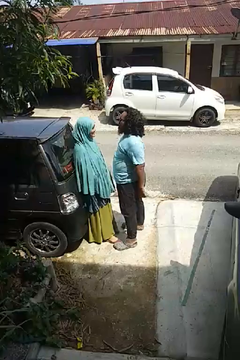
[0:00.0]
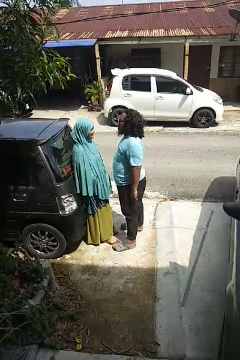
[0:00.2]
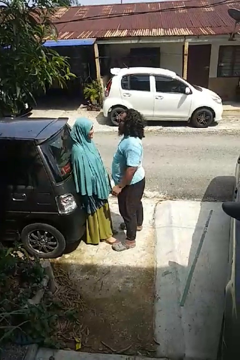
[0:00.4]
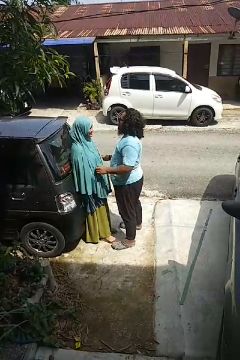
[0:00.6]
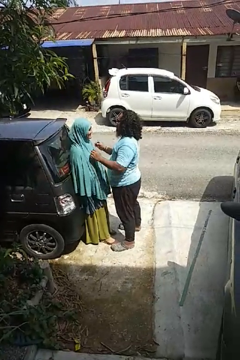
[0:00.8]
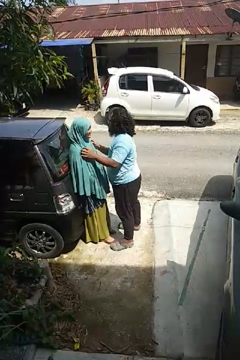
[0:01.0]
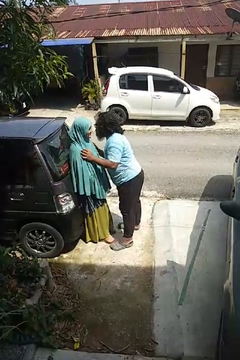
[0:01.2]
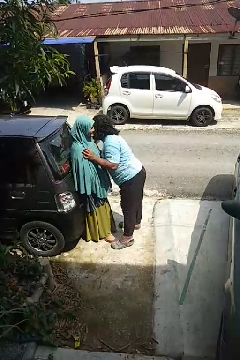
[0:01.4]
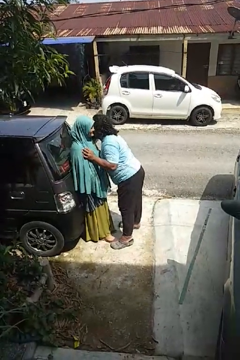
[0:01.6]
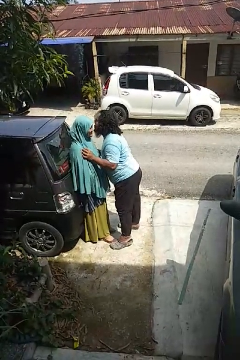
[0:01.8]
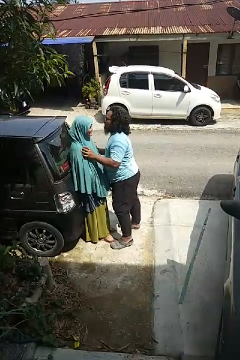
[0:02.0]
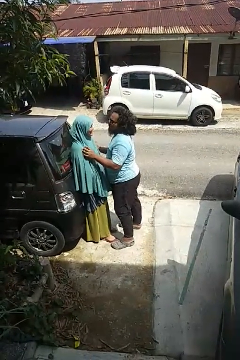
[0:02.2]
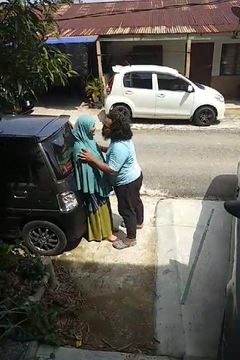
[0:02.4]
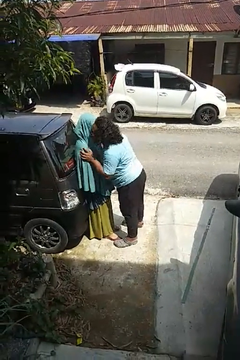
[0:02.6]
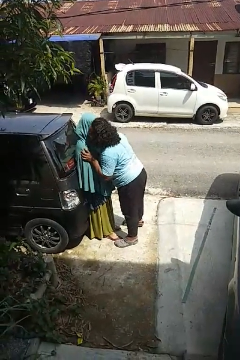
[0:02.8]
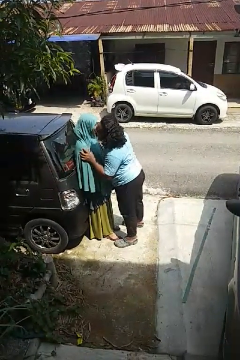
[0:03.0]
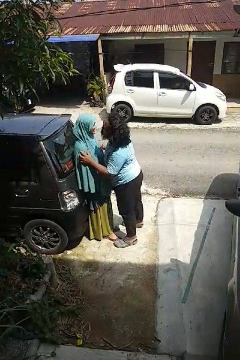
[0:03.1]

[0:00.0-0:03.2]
person kisses cheek of person

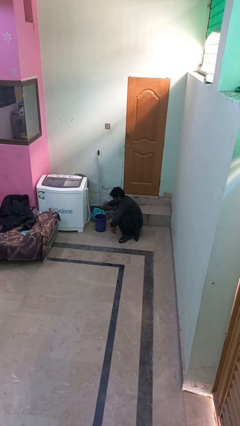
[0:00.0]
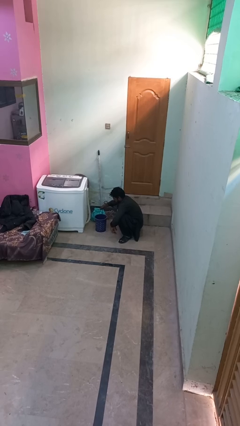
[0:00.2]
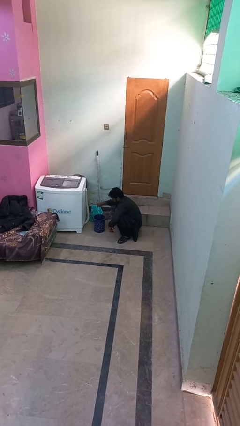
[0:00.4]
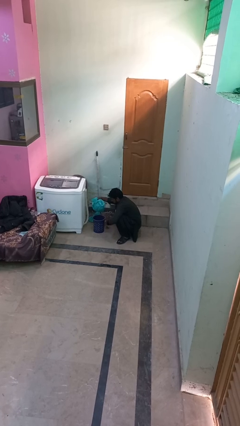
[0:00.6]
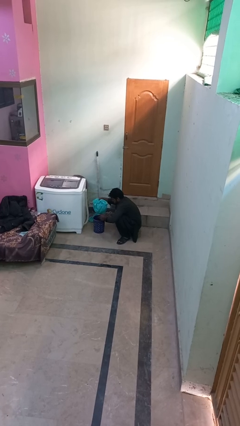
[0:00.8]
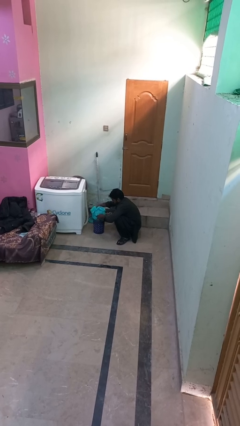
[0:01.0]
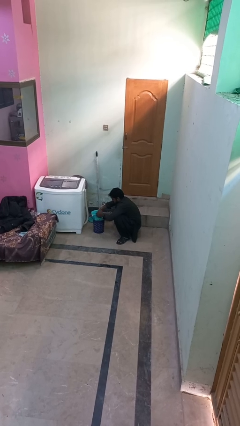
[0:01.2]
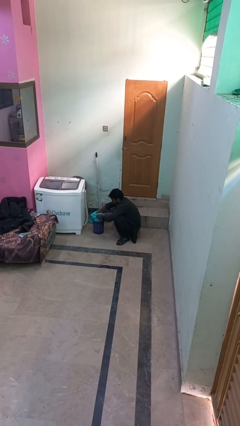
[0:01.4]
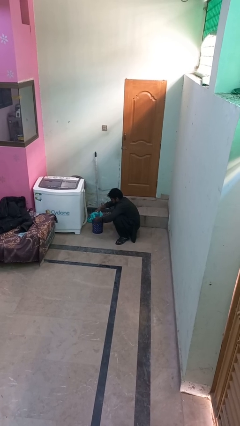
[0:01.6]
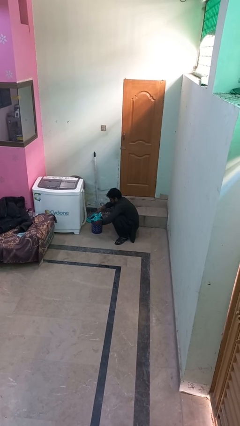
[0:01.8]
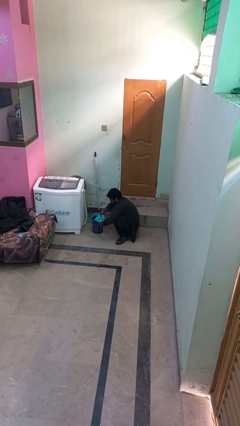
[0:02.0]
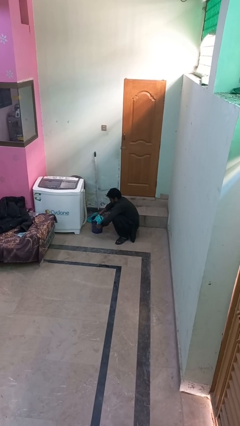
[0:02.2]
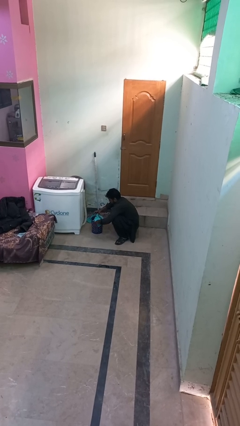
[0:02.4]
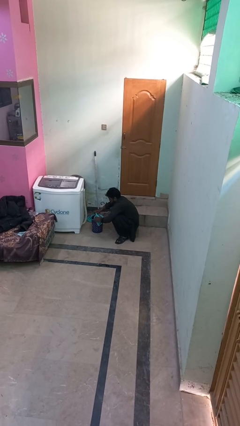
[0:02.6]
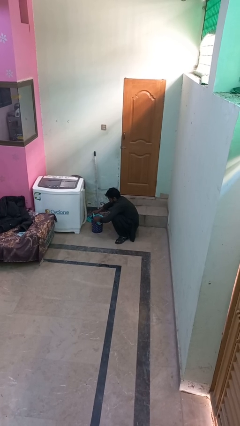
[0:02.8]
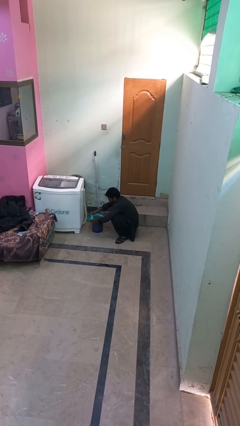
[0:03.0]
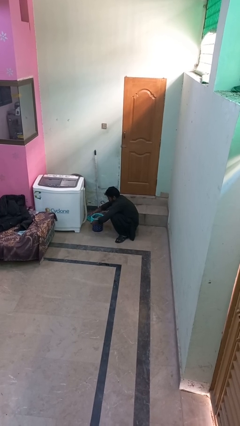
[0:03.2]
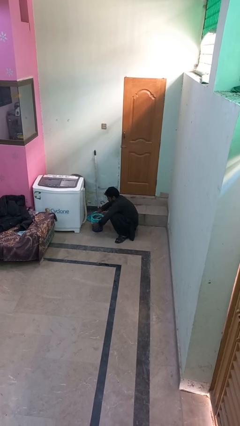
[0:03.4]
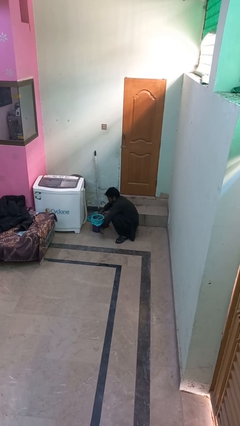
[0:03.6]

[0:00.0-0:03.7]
person inserts trashbag into trashcan

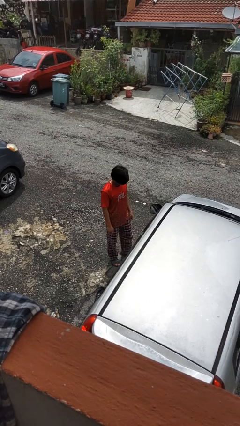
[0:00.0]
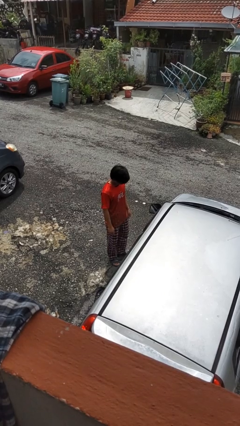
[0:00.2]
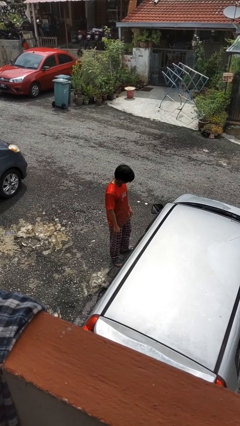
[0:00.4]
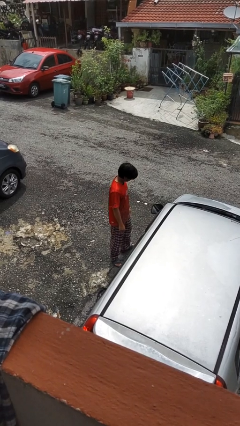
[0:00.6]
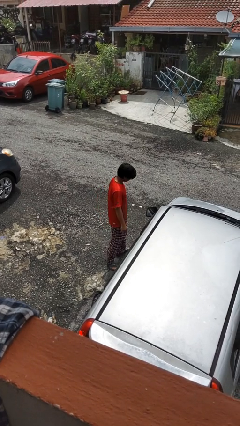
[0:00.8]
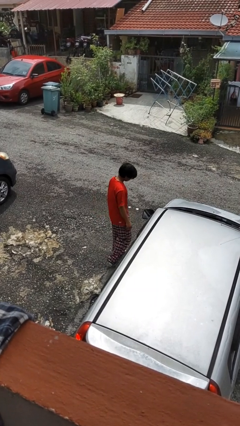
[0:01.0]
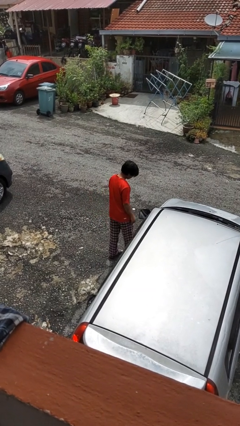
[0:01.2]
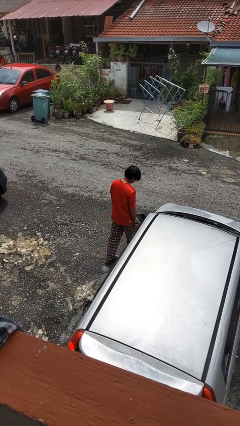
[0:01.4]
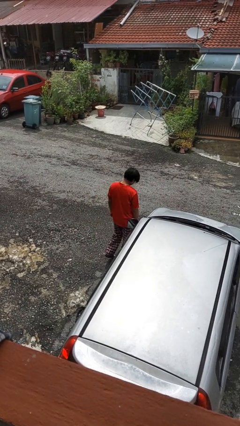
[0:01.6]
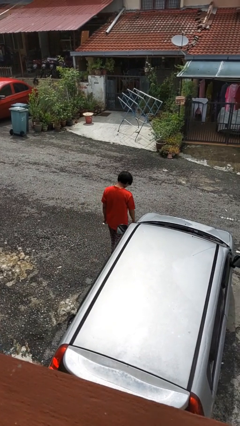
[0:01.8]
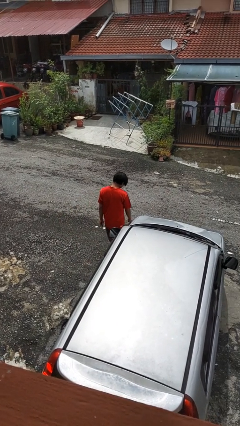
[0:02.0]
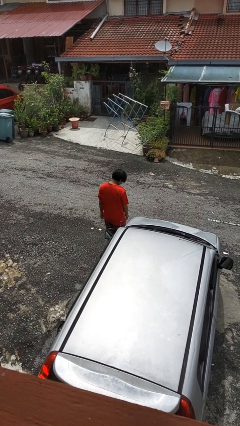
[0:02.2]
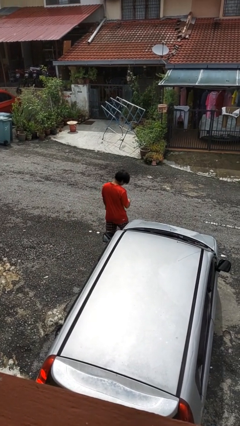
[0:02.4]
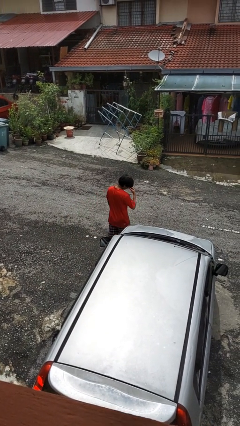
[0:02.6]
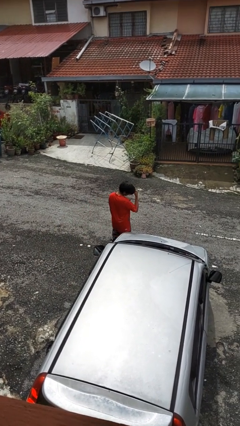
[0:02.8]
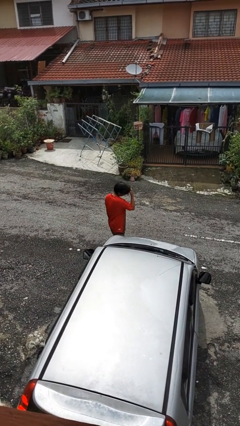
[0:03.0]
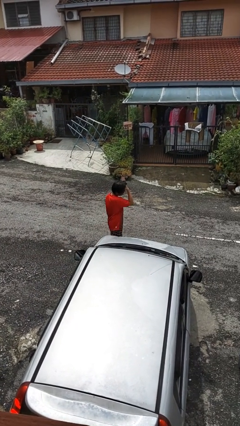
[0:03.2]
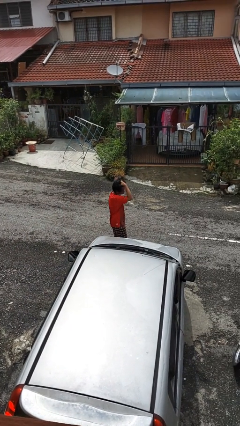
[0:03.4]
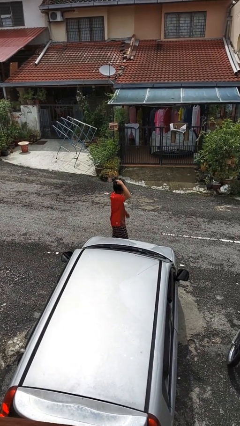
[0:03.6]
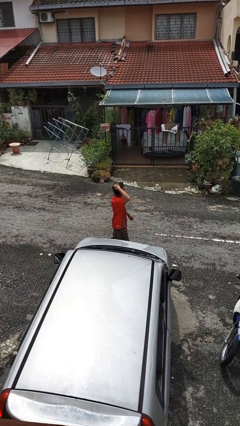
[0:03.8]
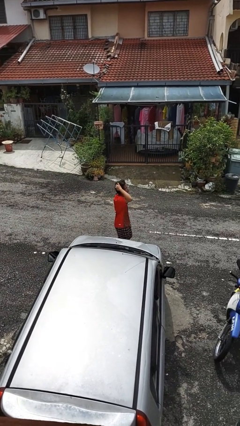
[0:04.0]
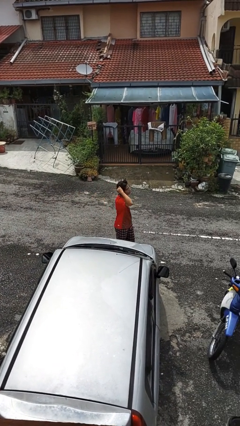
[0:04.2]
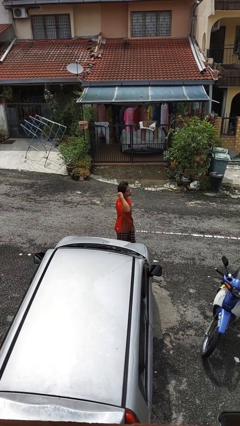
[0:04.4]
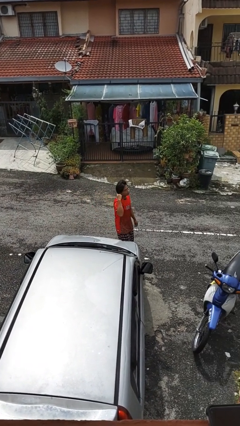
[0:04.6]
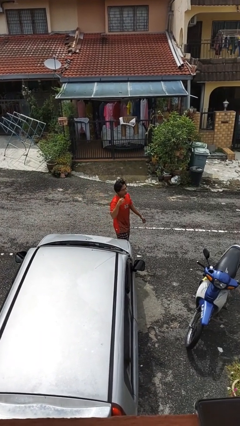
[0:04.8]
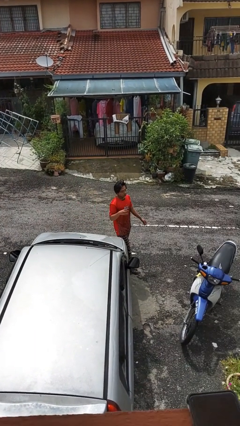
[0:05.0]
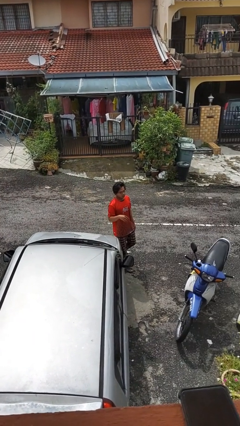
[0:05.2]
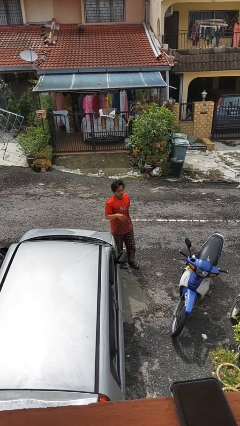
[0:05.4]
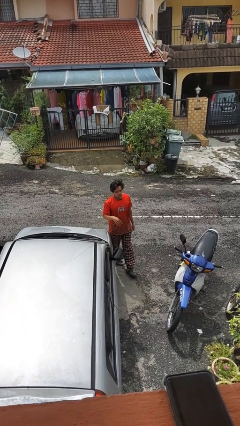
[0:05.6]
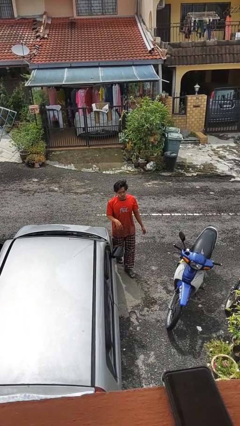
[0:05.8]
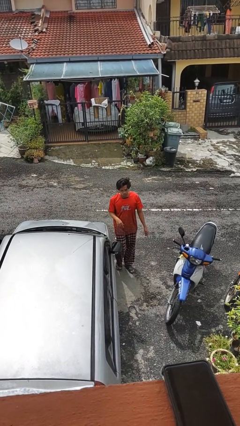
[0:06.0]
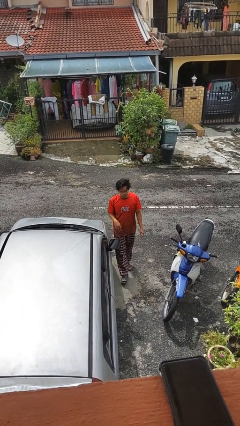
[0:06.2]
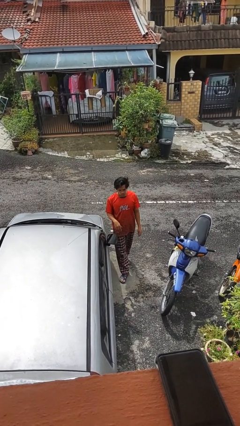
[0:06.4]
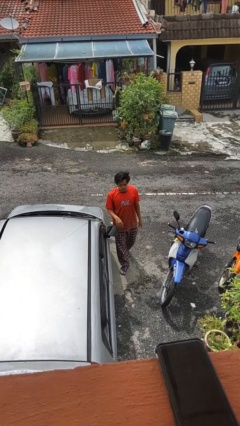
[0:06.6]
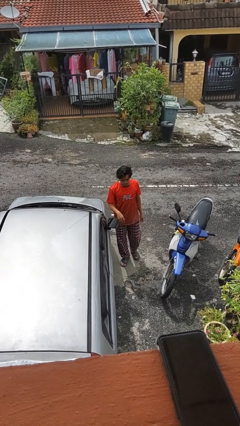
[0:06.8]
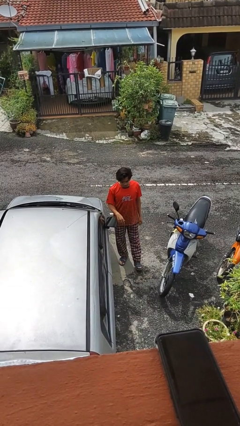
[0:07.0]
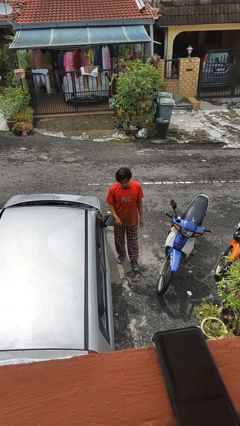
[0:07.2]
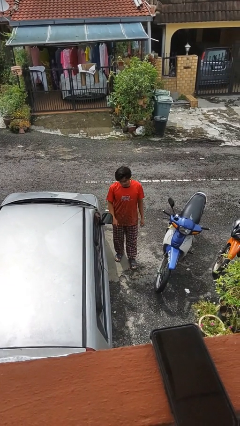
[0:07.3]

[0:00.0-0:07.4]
person walks around car

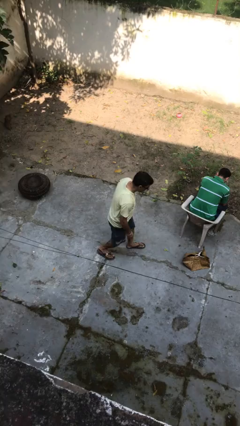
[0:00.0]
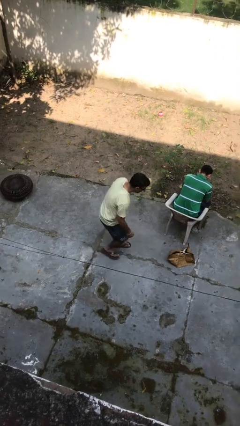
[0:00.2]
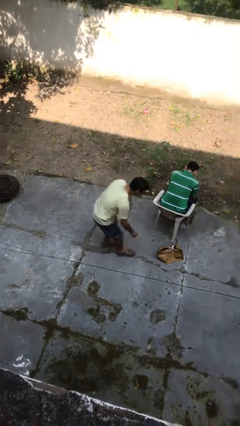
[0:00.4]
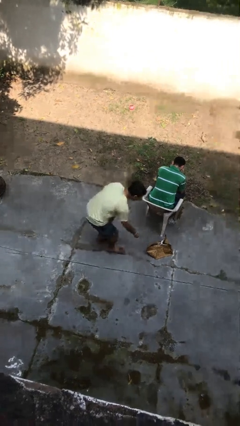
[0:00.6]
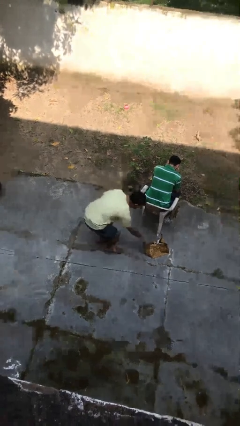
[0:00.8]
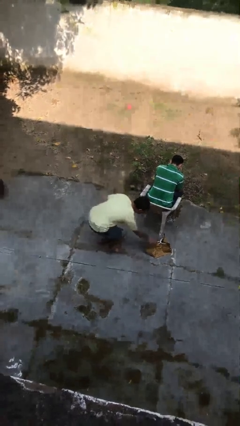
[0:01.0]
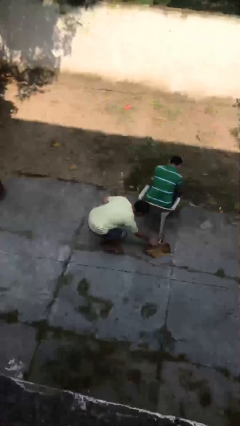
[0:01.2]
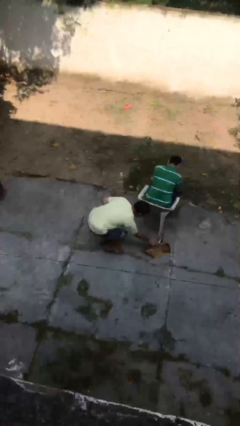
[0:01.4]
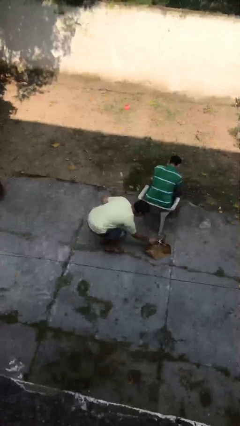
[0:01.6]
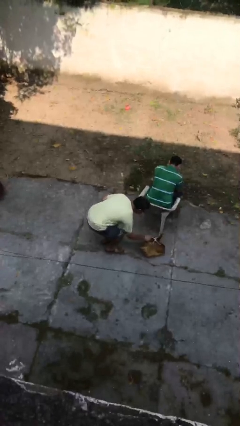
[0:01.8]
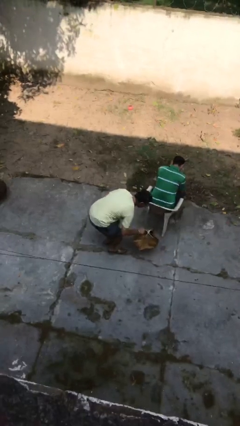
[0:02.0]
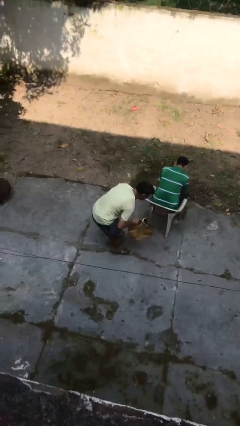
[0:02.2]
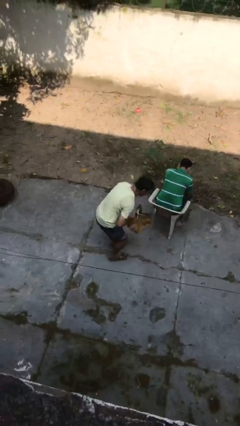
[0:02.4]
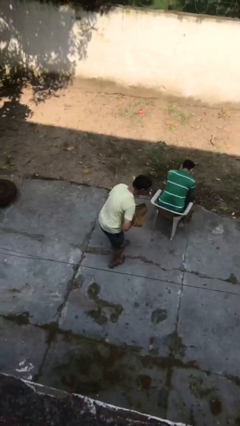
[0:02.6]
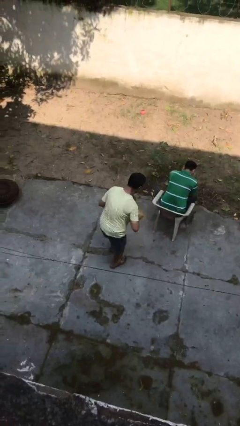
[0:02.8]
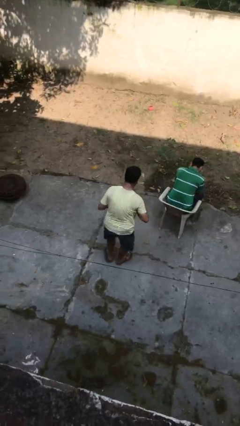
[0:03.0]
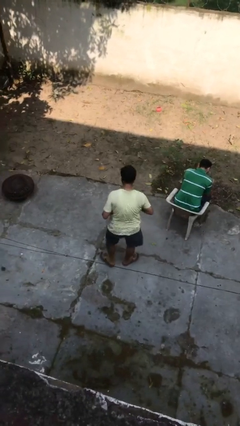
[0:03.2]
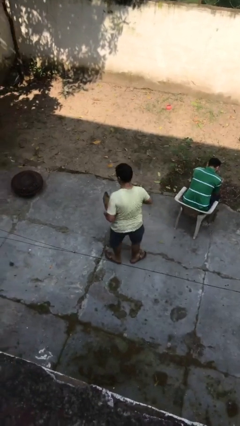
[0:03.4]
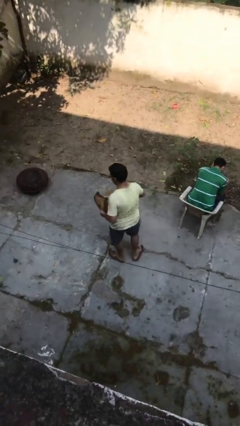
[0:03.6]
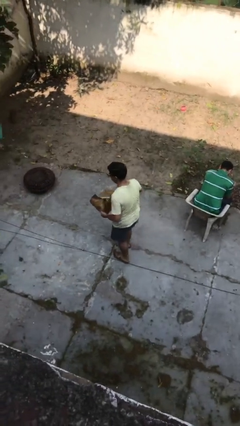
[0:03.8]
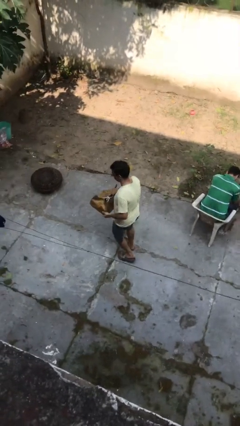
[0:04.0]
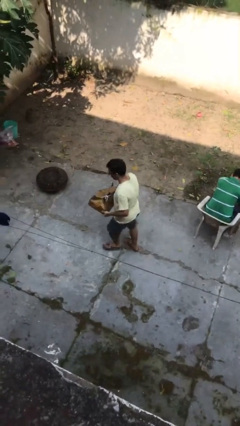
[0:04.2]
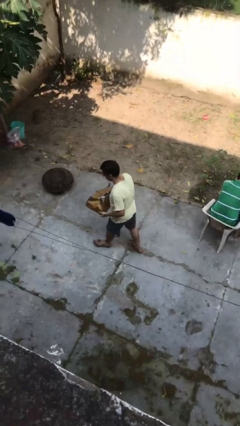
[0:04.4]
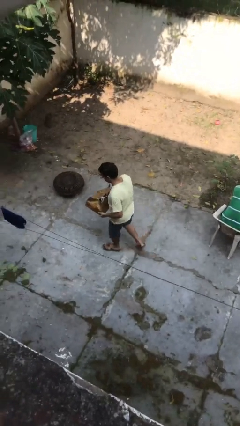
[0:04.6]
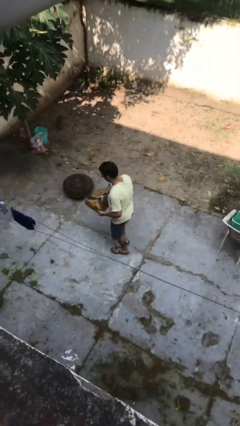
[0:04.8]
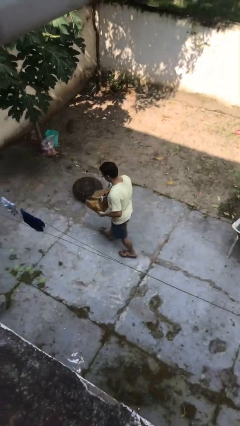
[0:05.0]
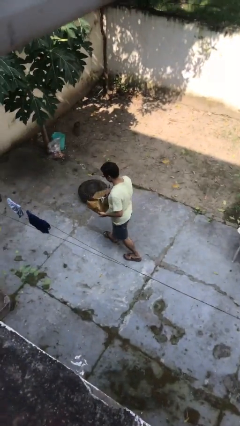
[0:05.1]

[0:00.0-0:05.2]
person steals object from person
